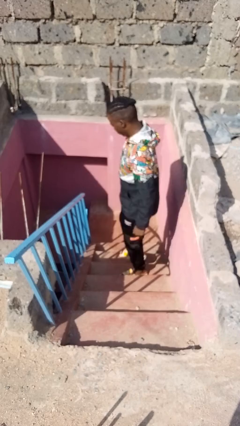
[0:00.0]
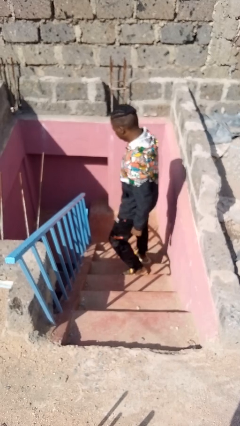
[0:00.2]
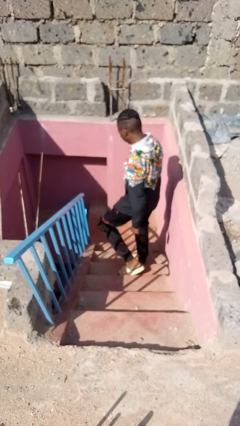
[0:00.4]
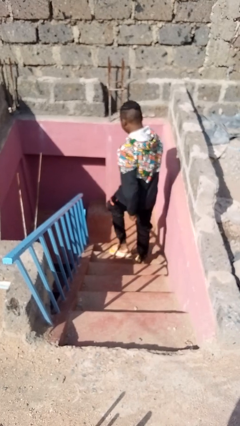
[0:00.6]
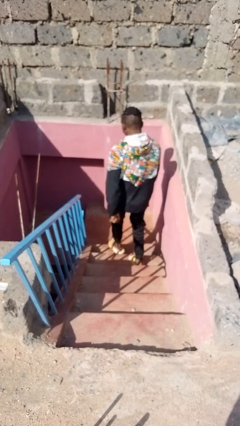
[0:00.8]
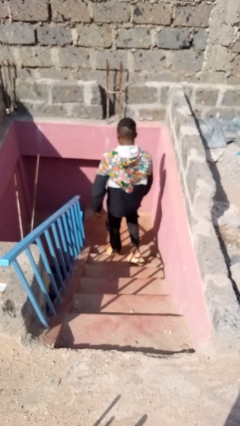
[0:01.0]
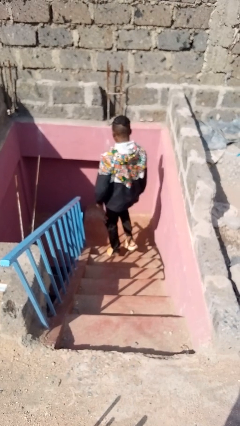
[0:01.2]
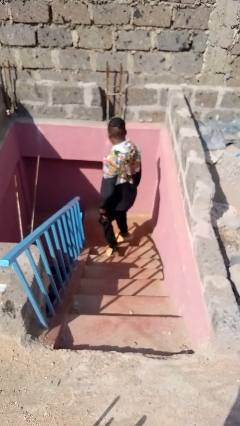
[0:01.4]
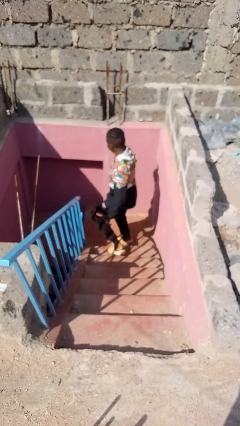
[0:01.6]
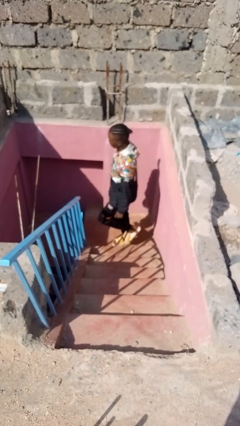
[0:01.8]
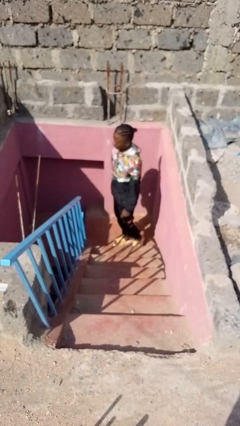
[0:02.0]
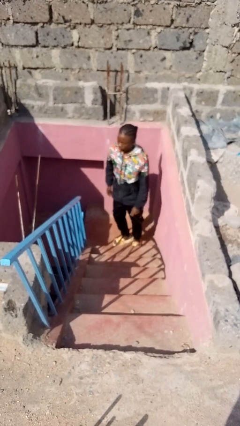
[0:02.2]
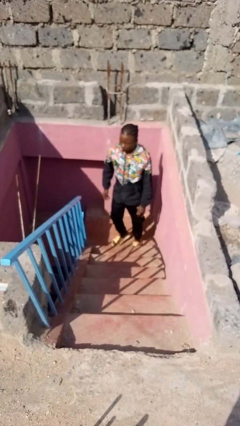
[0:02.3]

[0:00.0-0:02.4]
person climbs down stairs

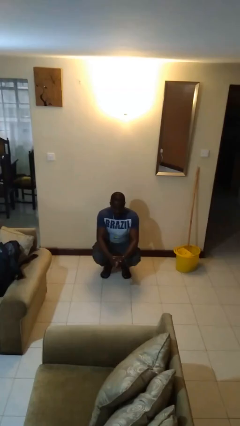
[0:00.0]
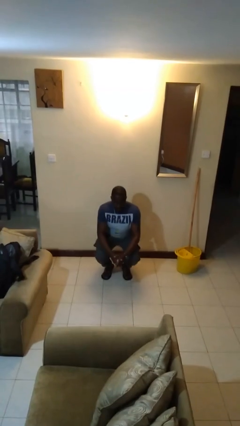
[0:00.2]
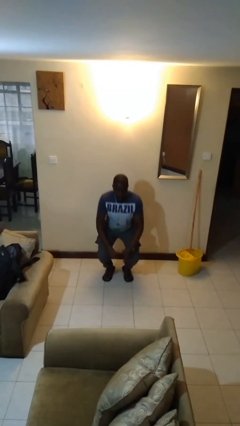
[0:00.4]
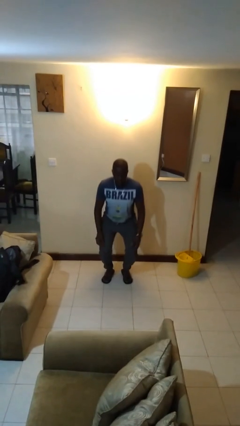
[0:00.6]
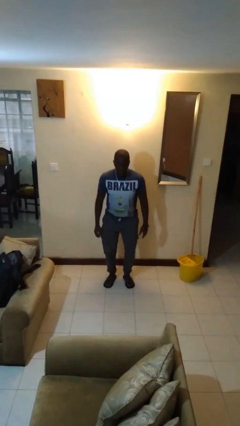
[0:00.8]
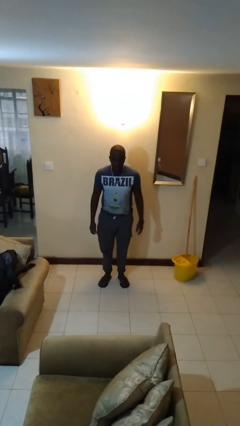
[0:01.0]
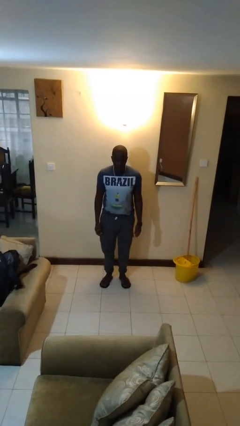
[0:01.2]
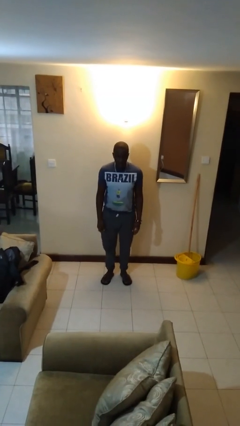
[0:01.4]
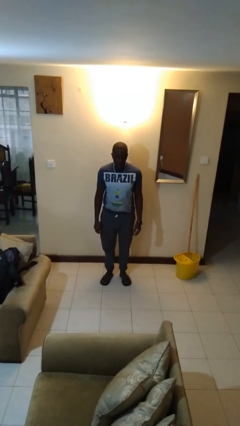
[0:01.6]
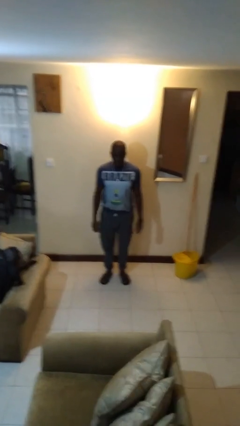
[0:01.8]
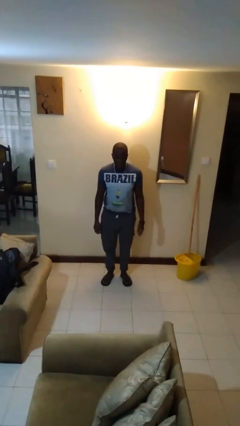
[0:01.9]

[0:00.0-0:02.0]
person stands up

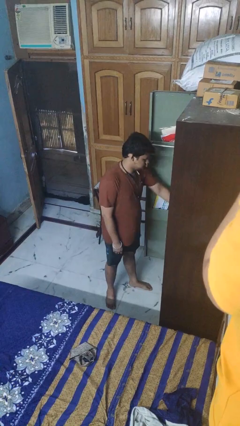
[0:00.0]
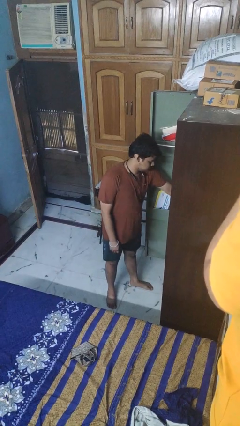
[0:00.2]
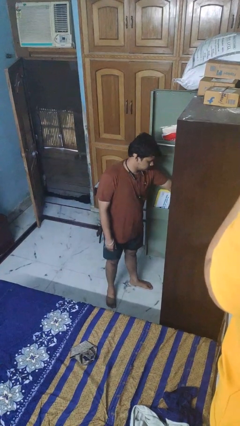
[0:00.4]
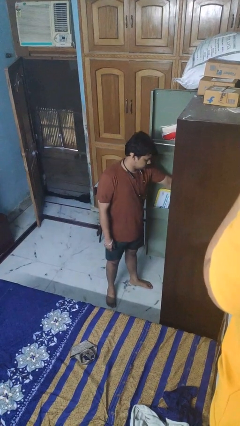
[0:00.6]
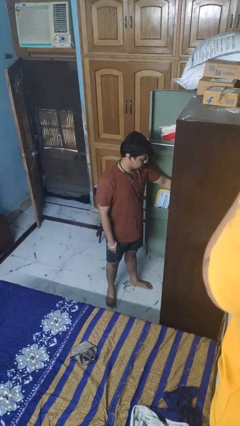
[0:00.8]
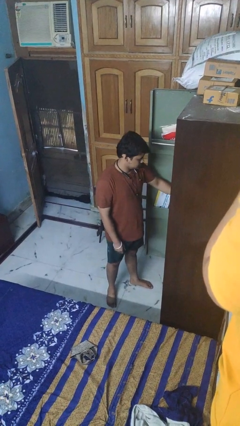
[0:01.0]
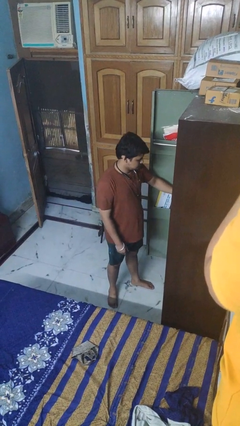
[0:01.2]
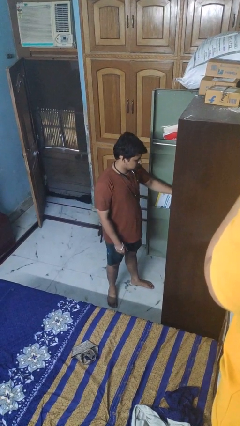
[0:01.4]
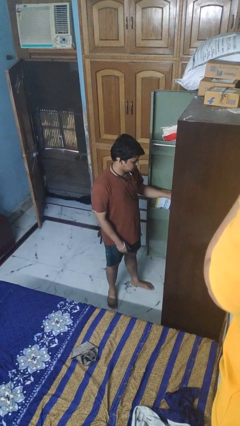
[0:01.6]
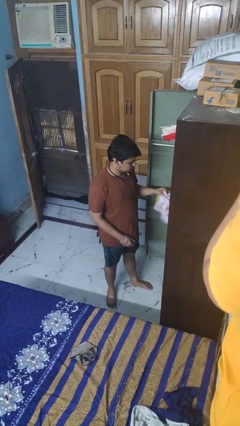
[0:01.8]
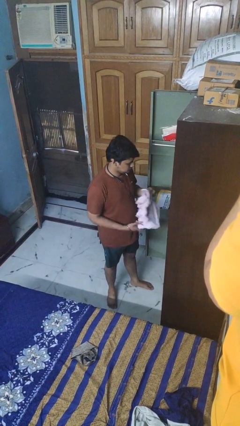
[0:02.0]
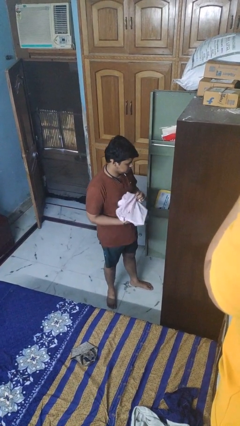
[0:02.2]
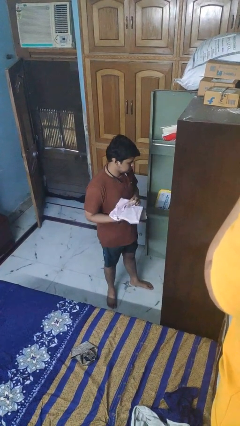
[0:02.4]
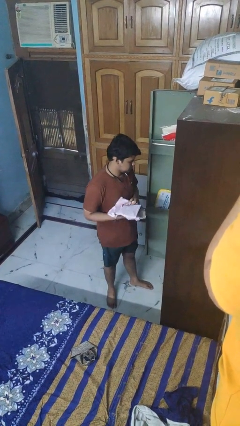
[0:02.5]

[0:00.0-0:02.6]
person takes clothes from dresser

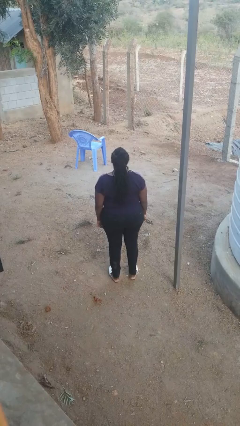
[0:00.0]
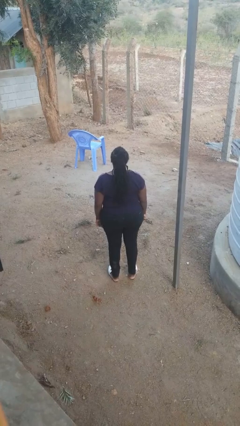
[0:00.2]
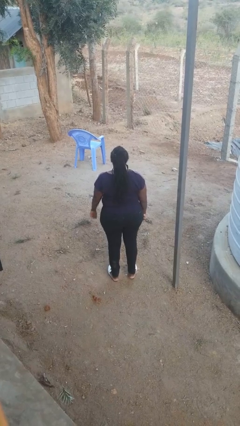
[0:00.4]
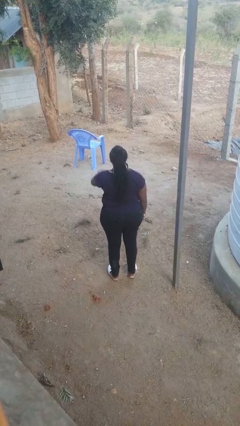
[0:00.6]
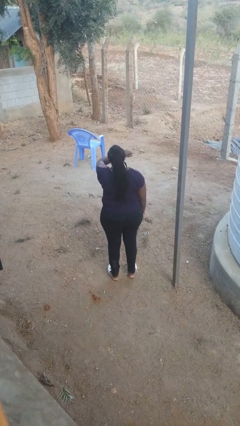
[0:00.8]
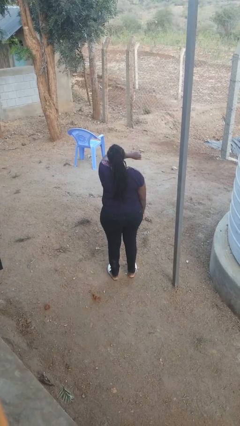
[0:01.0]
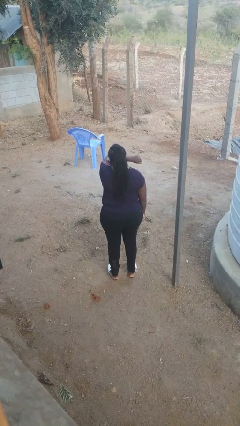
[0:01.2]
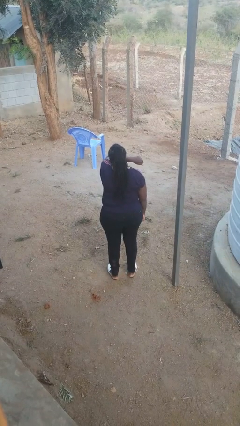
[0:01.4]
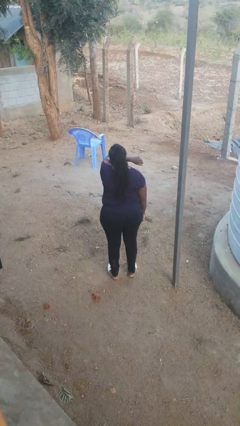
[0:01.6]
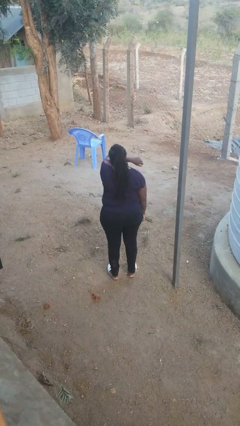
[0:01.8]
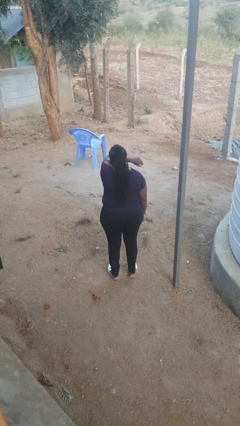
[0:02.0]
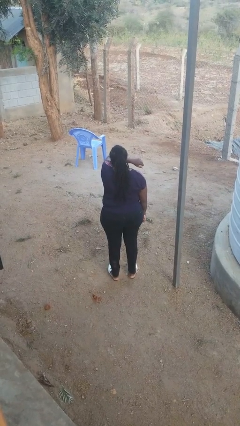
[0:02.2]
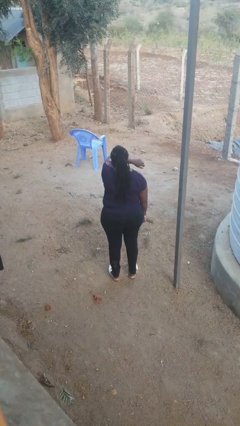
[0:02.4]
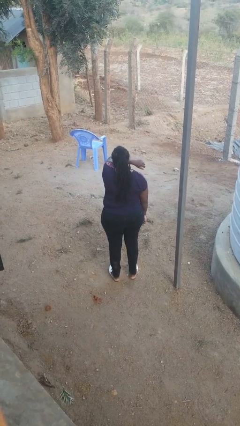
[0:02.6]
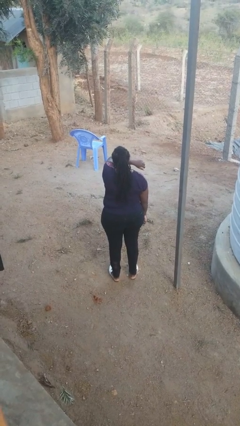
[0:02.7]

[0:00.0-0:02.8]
person sneezes into arm

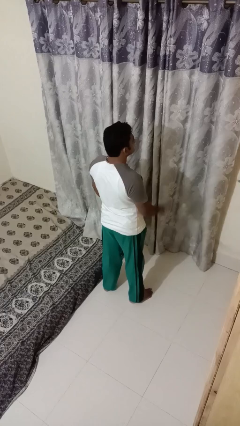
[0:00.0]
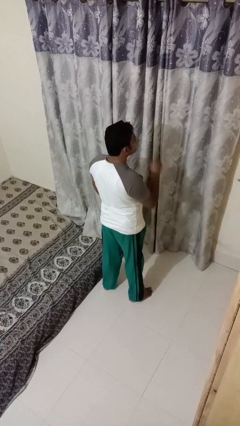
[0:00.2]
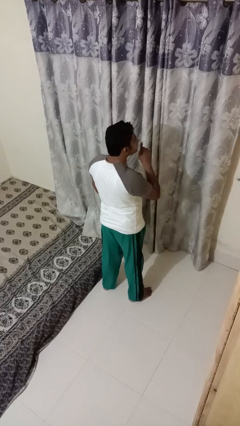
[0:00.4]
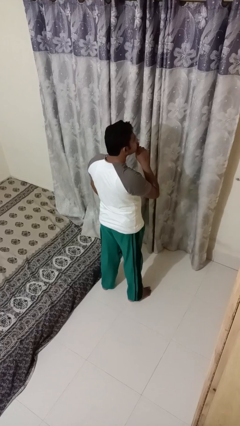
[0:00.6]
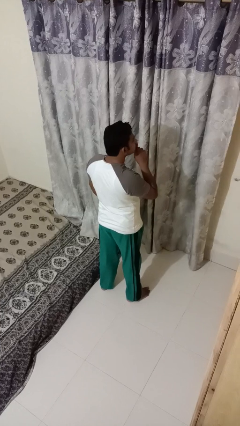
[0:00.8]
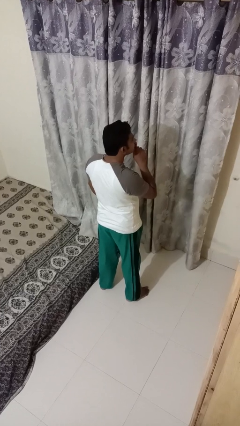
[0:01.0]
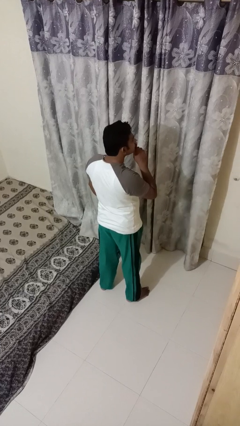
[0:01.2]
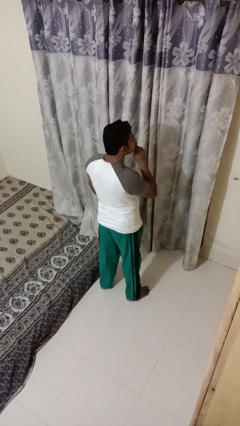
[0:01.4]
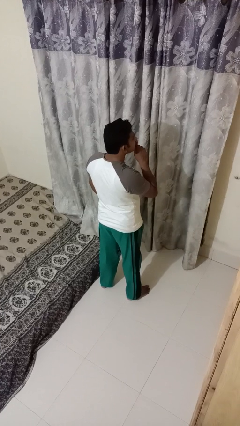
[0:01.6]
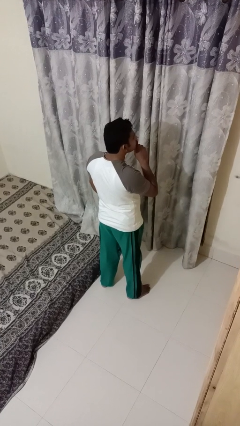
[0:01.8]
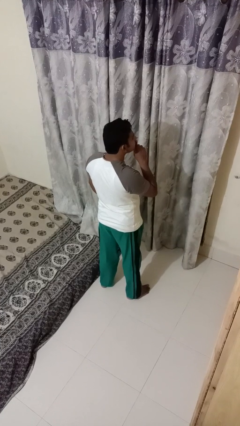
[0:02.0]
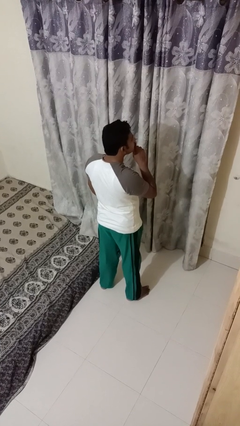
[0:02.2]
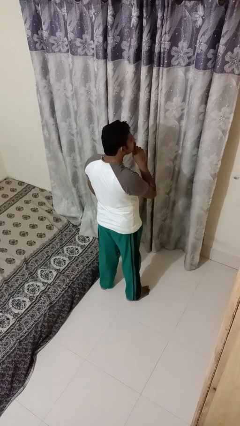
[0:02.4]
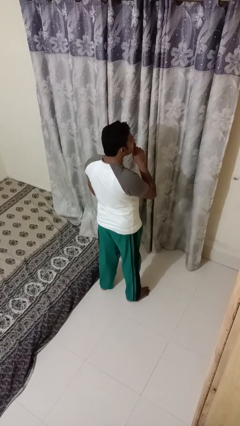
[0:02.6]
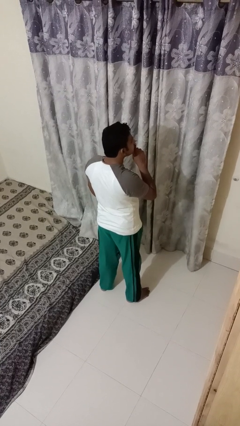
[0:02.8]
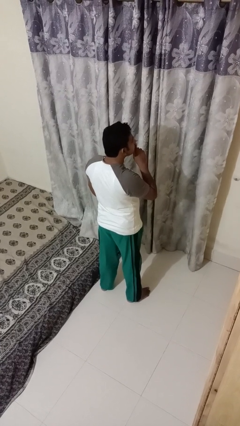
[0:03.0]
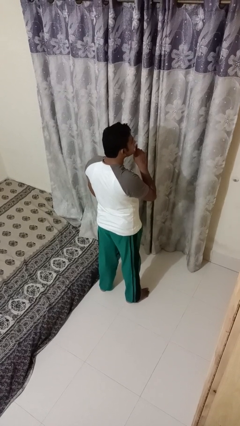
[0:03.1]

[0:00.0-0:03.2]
person gestures be quiet

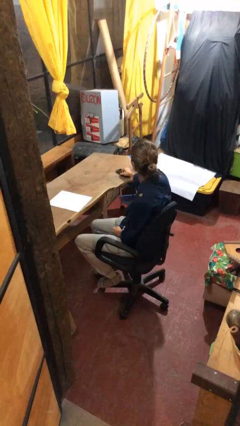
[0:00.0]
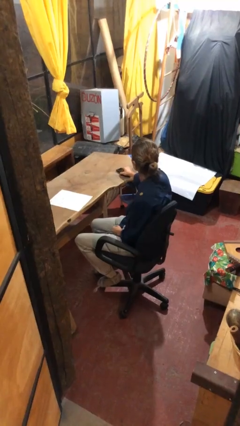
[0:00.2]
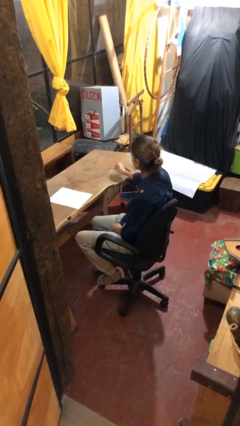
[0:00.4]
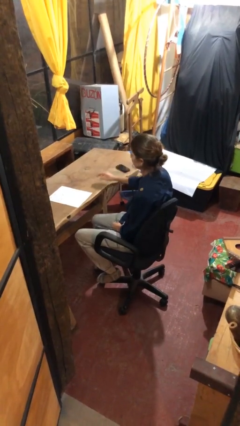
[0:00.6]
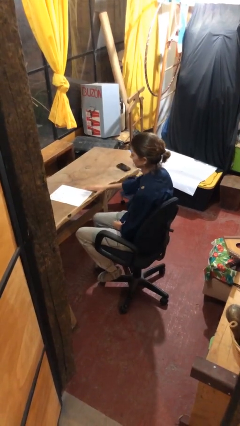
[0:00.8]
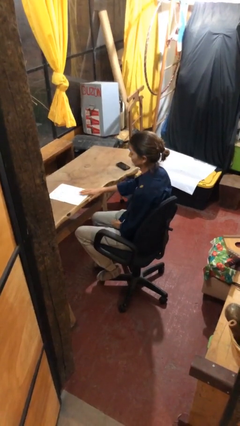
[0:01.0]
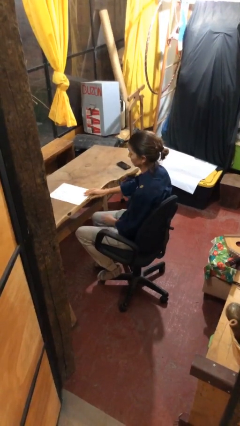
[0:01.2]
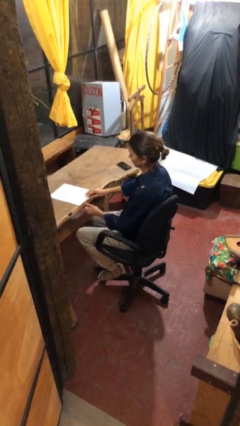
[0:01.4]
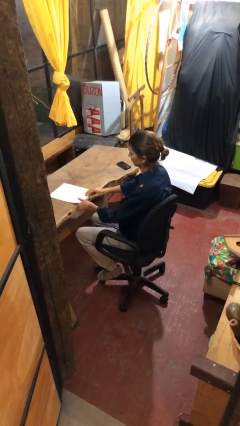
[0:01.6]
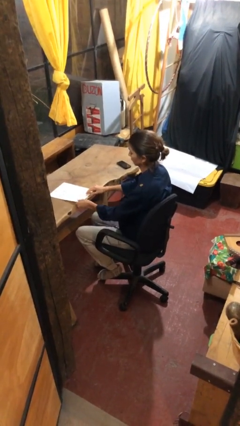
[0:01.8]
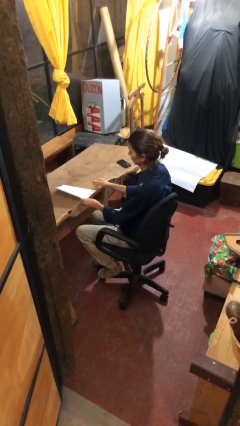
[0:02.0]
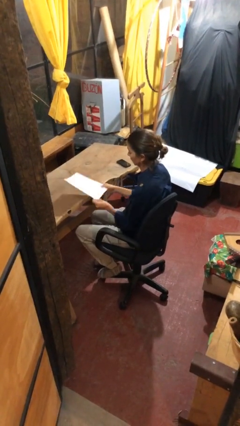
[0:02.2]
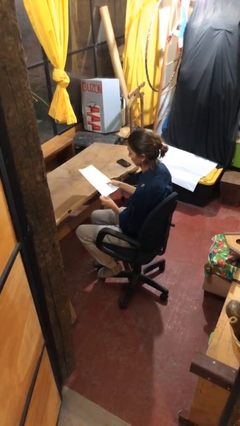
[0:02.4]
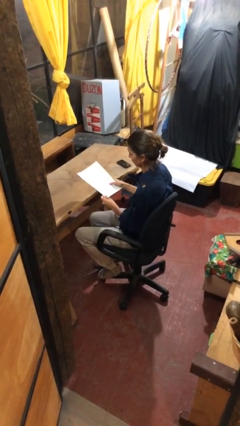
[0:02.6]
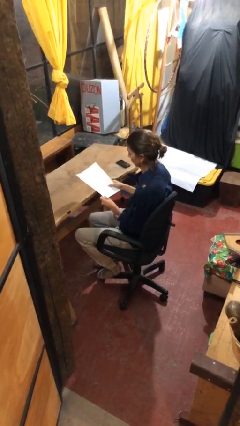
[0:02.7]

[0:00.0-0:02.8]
person picks up object from table

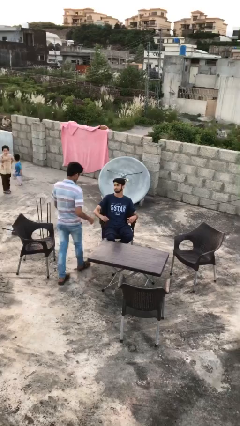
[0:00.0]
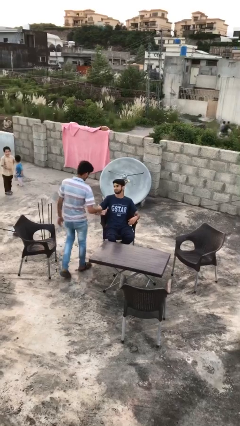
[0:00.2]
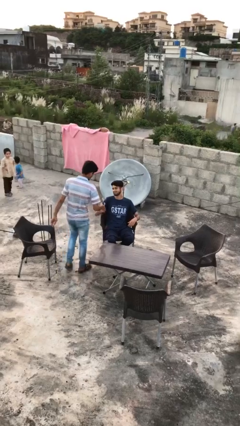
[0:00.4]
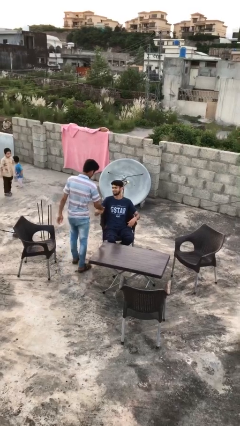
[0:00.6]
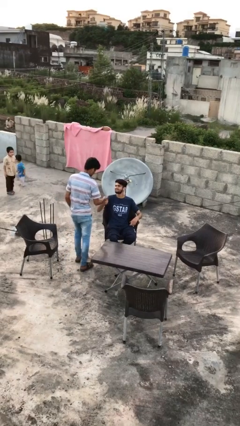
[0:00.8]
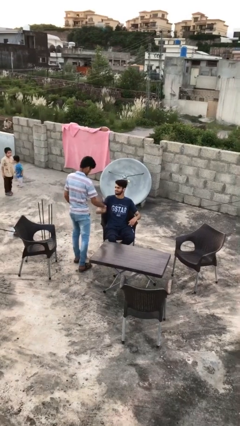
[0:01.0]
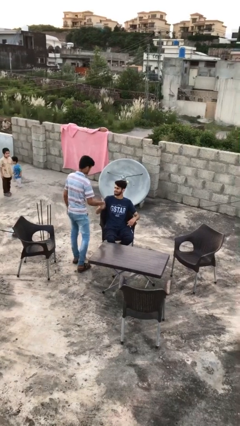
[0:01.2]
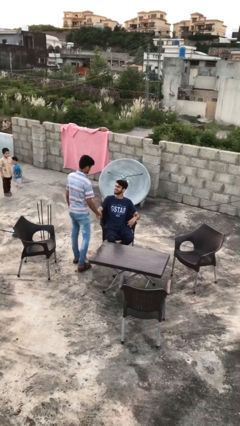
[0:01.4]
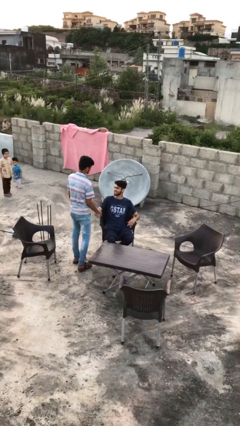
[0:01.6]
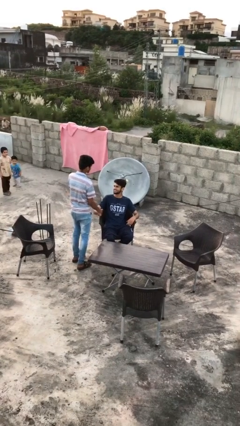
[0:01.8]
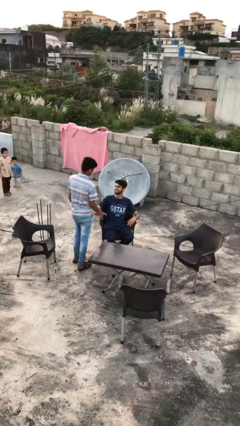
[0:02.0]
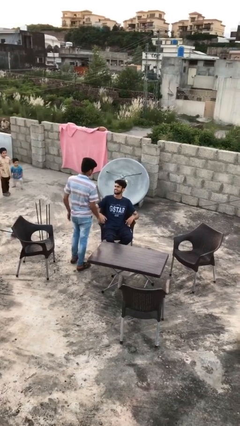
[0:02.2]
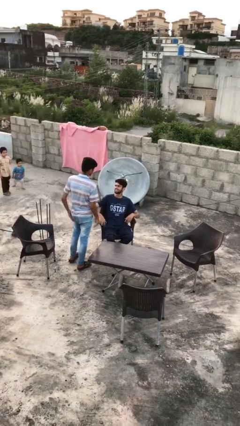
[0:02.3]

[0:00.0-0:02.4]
person shakes hand
